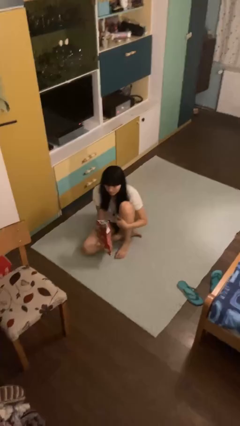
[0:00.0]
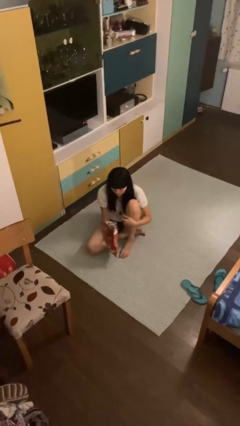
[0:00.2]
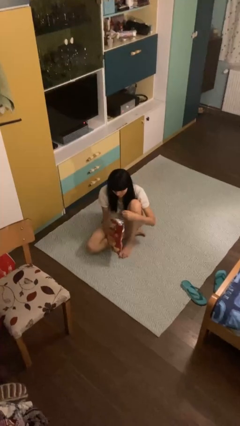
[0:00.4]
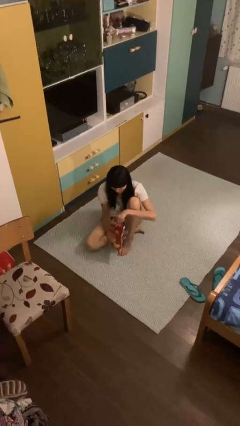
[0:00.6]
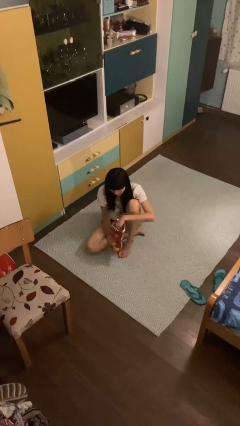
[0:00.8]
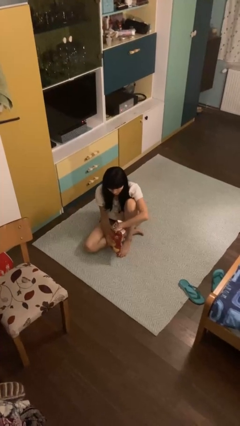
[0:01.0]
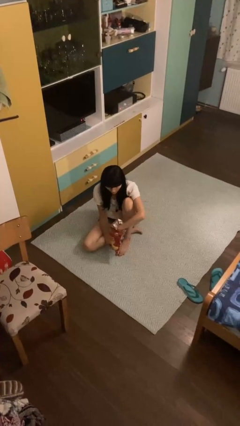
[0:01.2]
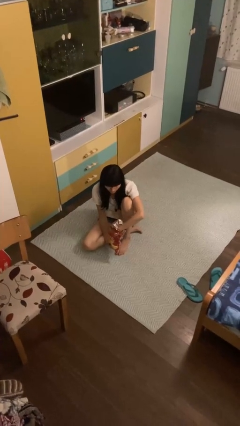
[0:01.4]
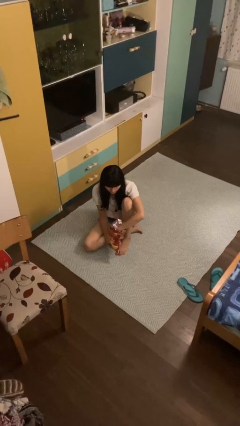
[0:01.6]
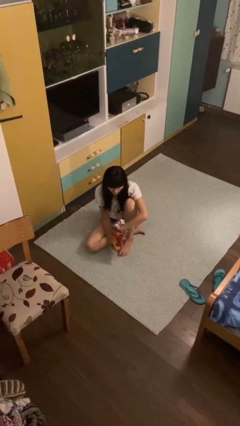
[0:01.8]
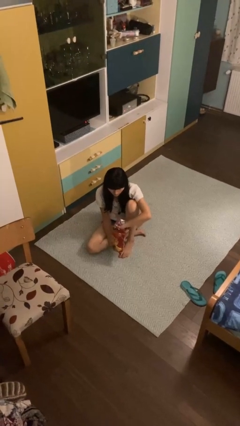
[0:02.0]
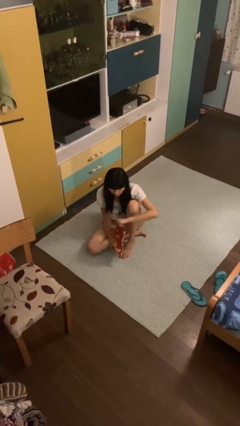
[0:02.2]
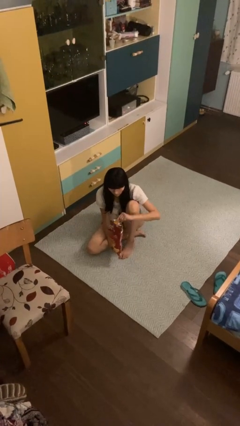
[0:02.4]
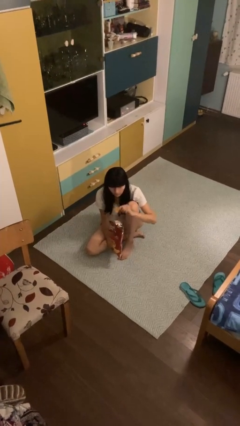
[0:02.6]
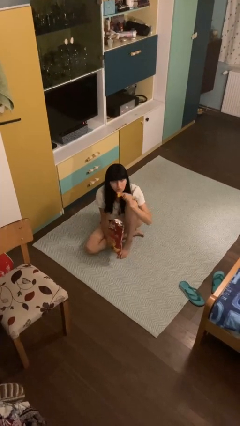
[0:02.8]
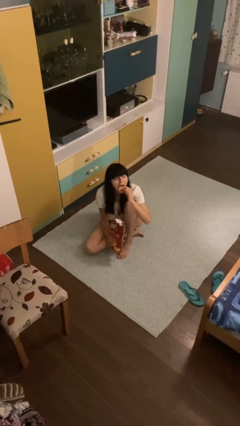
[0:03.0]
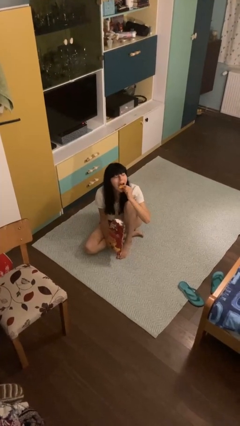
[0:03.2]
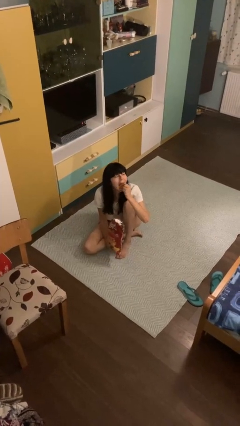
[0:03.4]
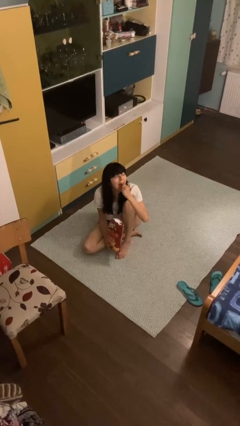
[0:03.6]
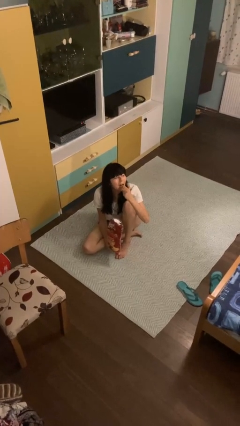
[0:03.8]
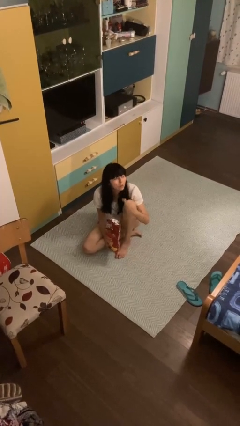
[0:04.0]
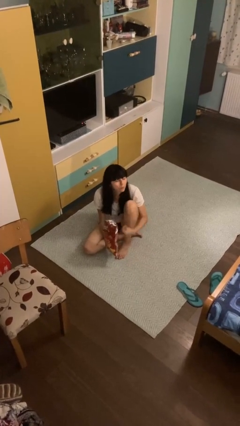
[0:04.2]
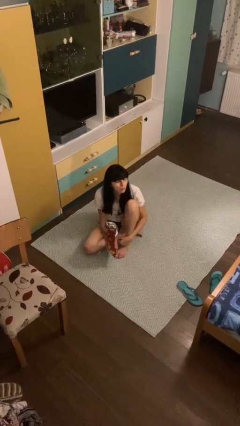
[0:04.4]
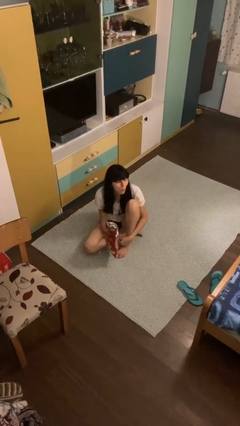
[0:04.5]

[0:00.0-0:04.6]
person eats snack from bag

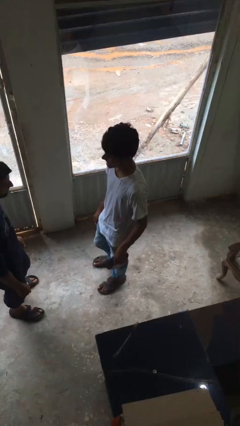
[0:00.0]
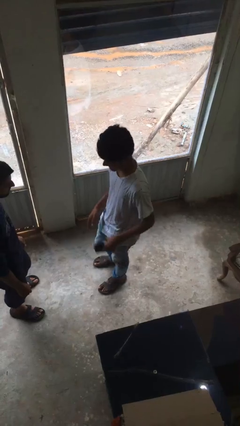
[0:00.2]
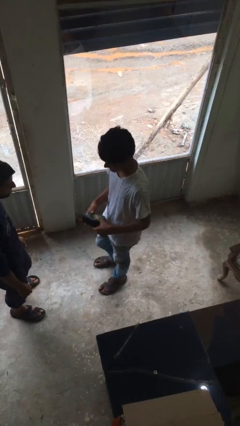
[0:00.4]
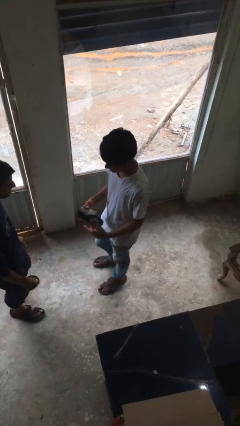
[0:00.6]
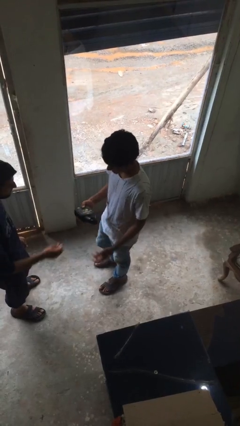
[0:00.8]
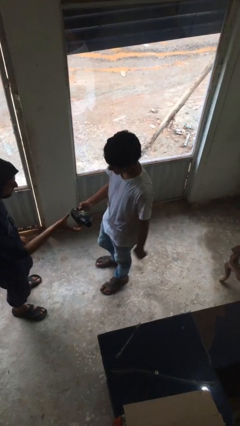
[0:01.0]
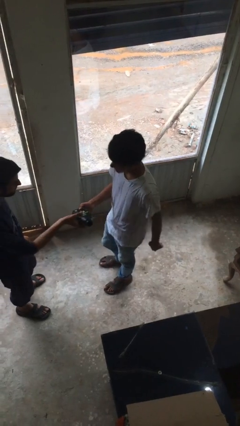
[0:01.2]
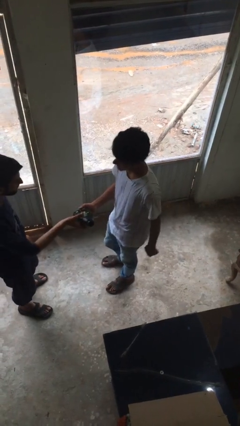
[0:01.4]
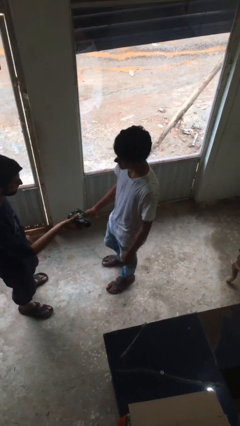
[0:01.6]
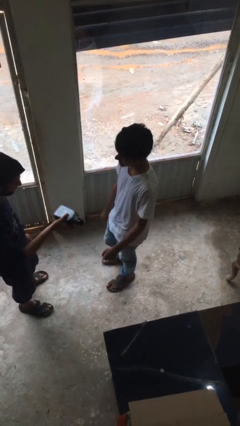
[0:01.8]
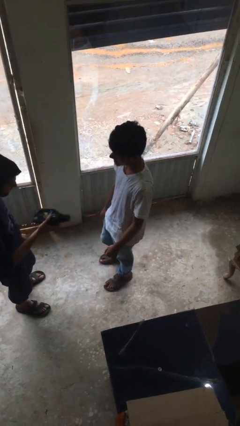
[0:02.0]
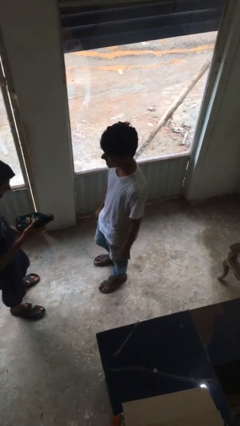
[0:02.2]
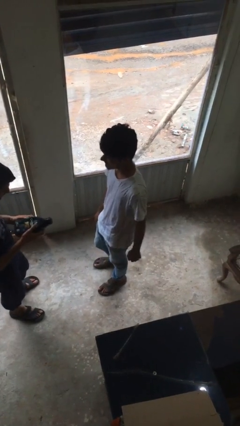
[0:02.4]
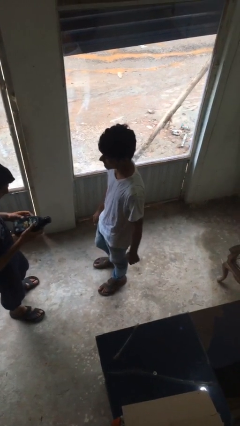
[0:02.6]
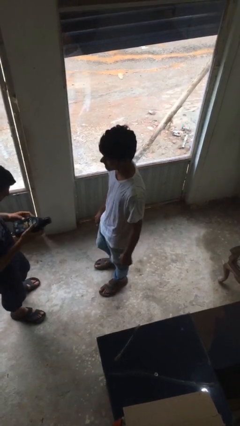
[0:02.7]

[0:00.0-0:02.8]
person transfers object to person

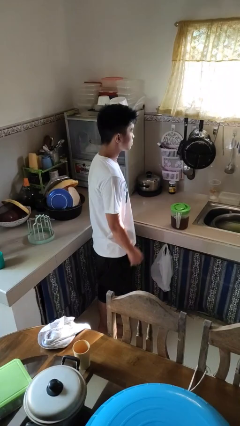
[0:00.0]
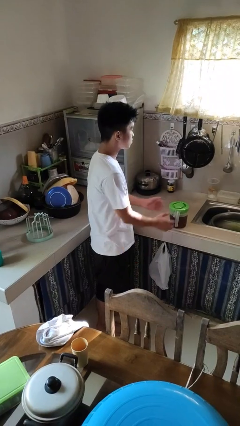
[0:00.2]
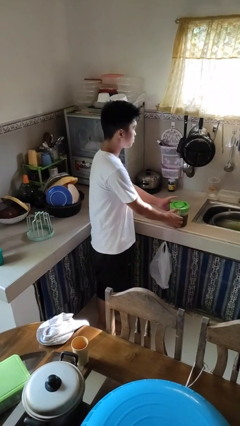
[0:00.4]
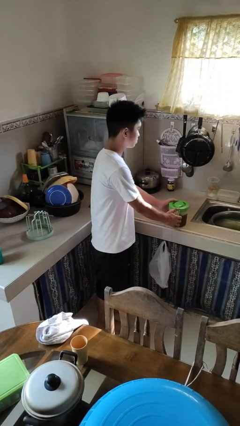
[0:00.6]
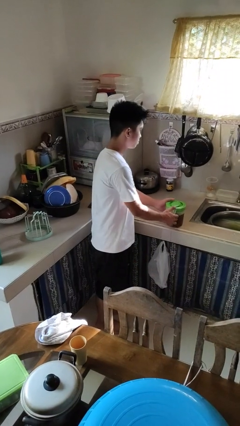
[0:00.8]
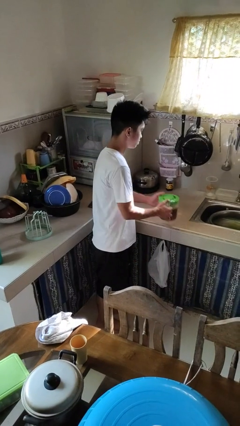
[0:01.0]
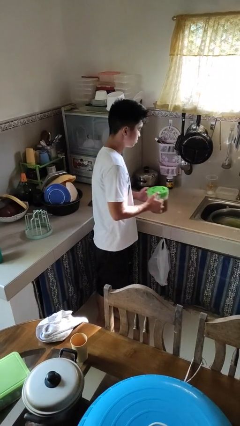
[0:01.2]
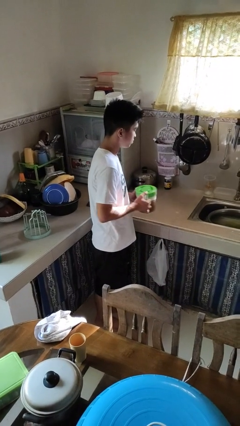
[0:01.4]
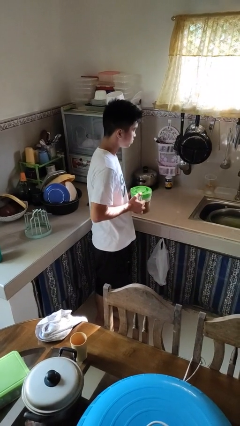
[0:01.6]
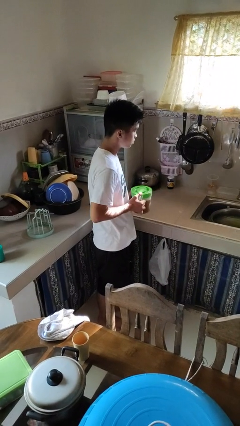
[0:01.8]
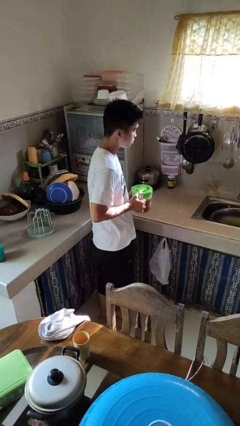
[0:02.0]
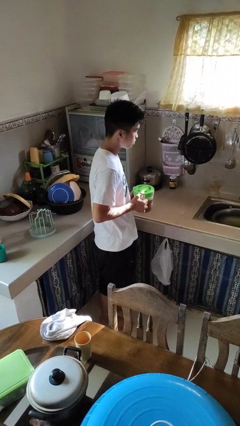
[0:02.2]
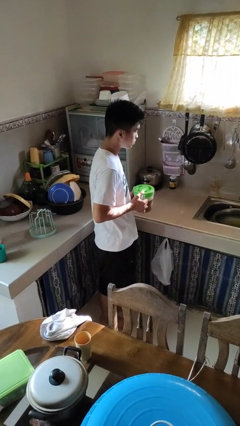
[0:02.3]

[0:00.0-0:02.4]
person picks up object from countertop

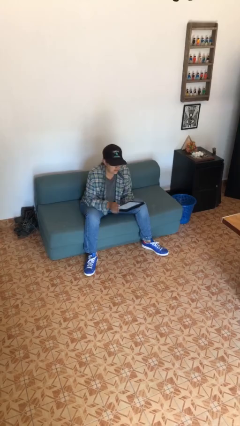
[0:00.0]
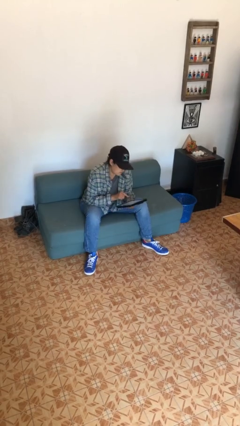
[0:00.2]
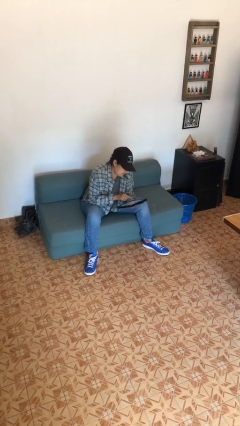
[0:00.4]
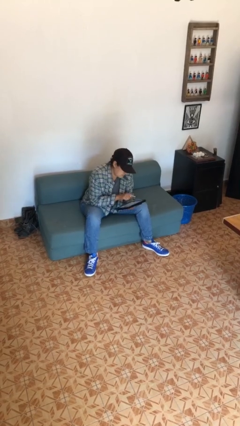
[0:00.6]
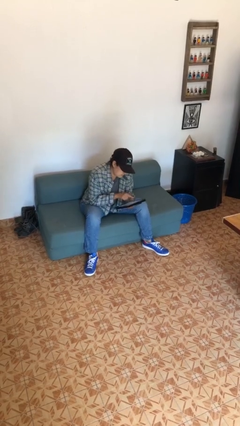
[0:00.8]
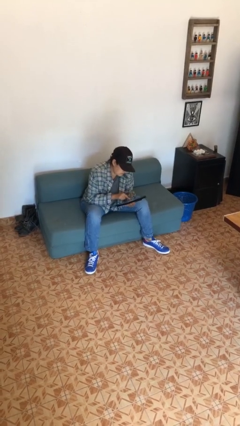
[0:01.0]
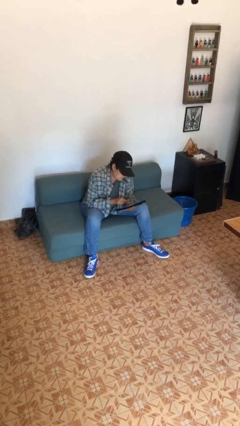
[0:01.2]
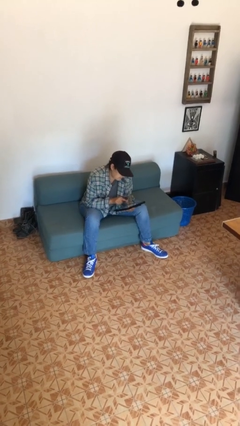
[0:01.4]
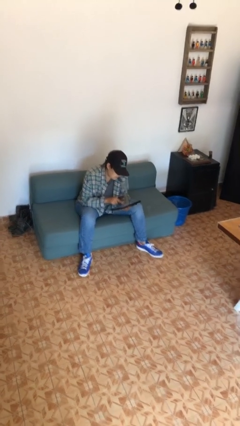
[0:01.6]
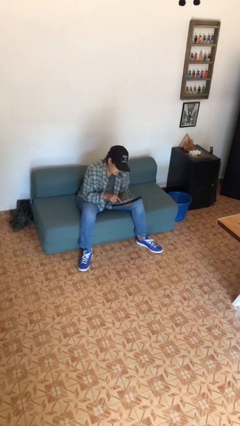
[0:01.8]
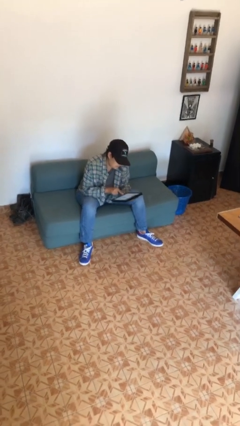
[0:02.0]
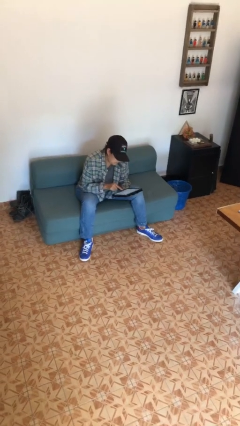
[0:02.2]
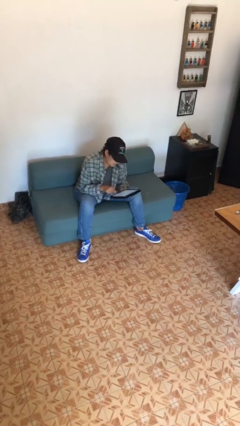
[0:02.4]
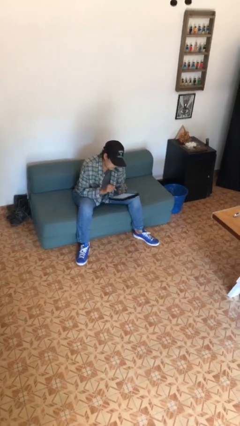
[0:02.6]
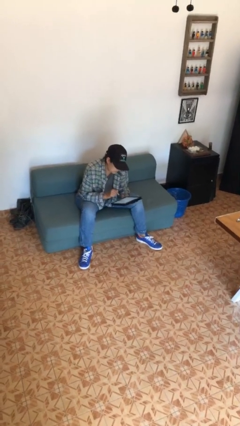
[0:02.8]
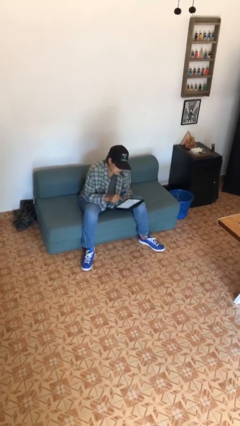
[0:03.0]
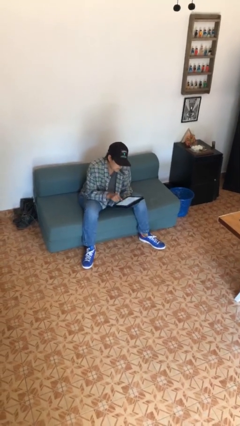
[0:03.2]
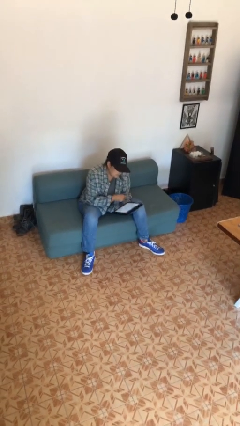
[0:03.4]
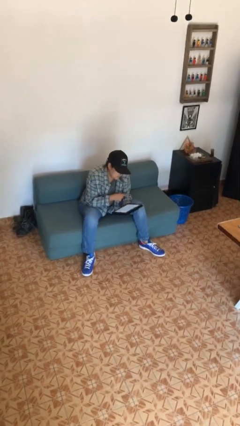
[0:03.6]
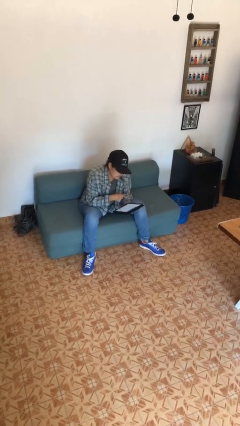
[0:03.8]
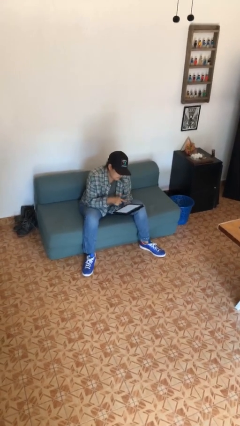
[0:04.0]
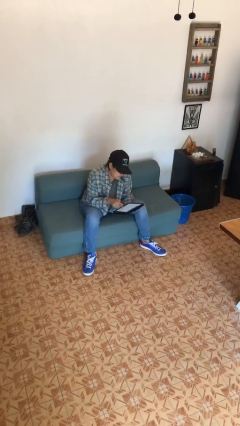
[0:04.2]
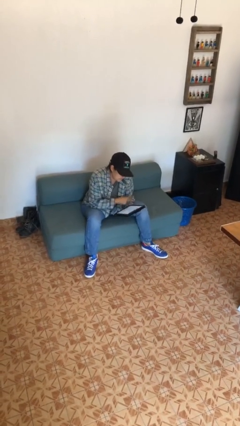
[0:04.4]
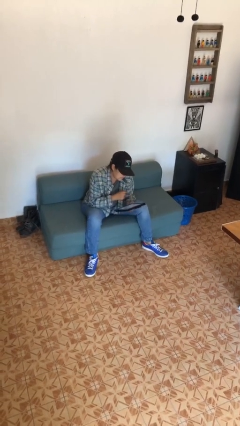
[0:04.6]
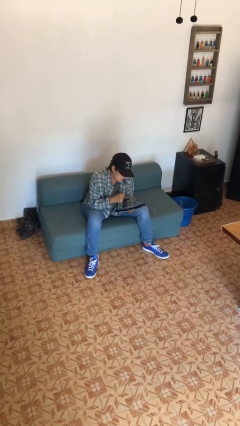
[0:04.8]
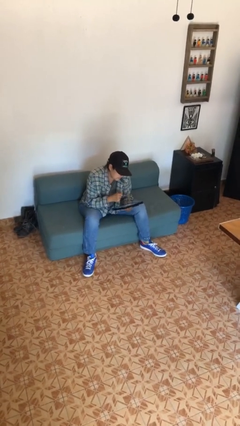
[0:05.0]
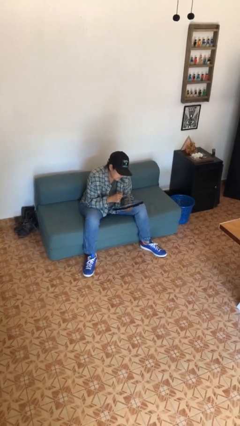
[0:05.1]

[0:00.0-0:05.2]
person interacts with tablet

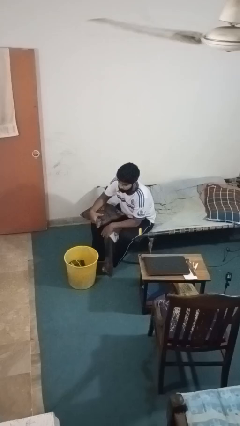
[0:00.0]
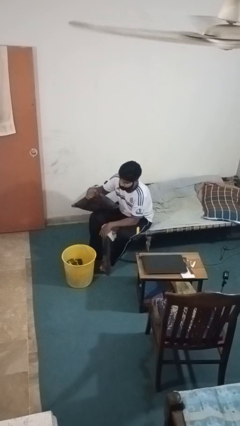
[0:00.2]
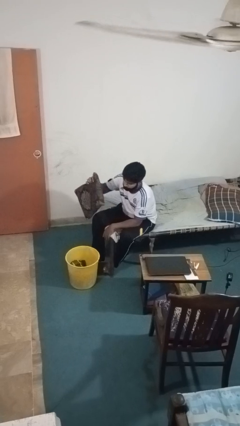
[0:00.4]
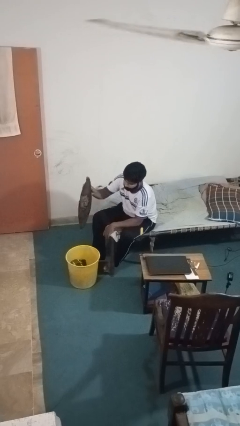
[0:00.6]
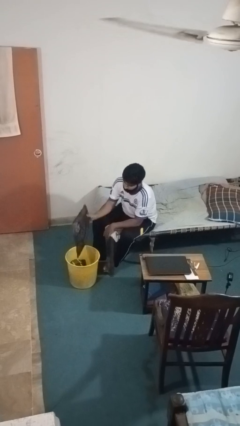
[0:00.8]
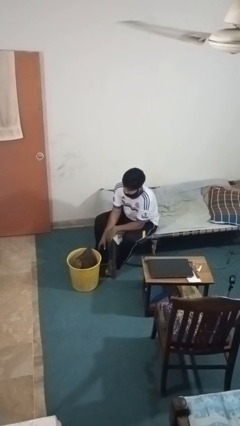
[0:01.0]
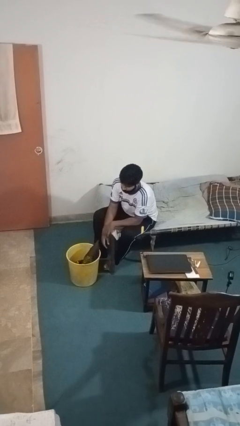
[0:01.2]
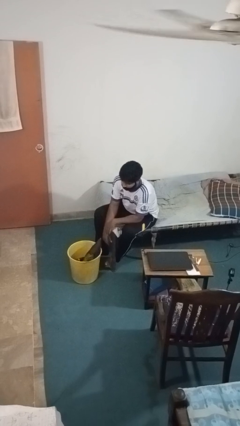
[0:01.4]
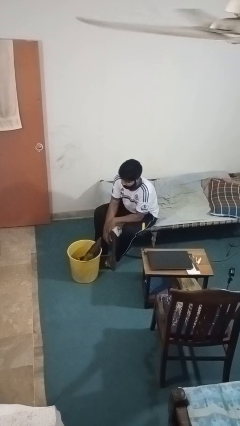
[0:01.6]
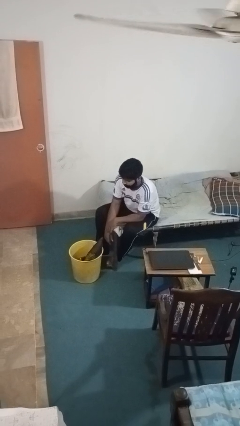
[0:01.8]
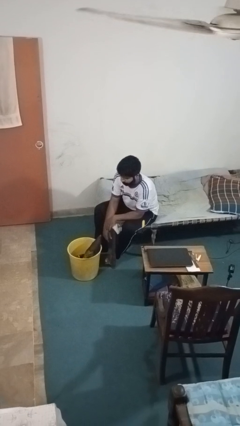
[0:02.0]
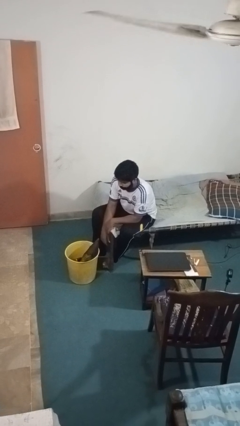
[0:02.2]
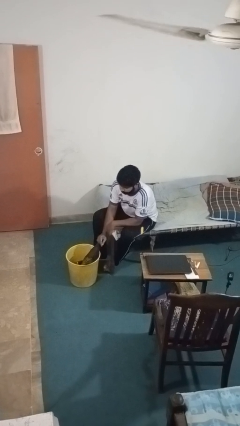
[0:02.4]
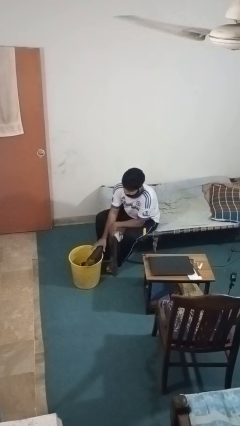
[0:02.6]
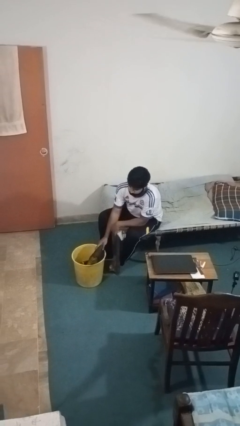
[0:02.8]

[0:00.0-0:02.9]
person puts object into basket
